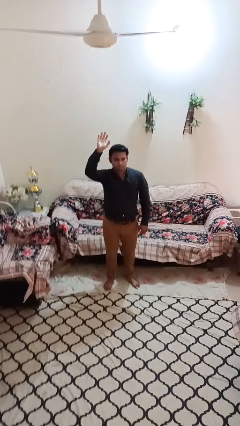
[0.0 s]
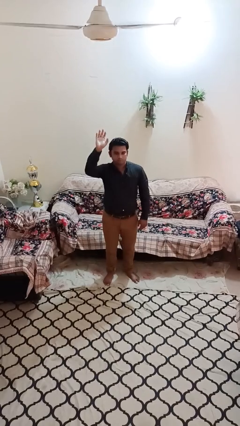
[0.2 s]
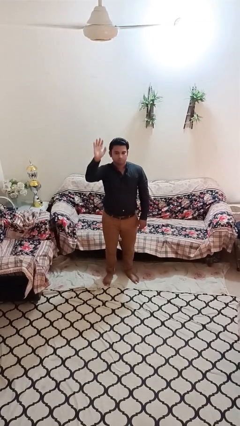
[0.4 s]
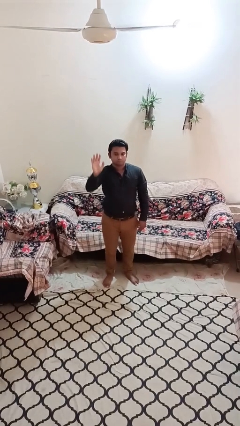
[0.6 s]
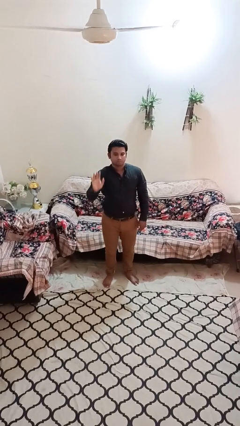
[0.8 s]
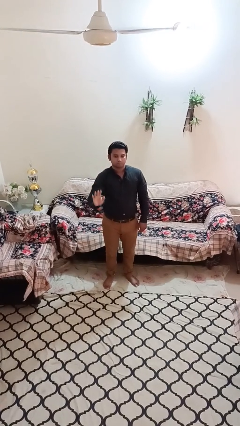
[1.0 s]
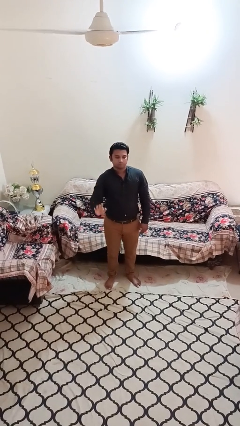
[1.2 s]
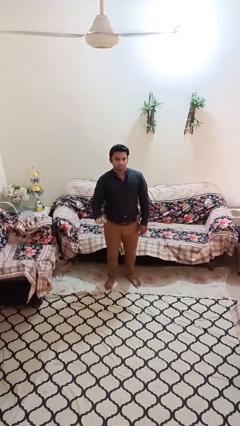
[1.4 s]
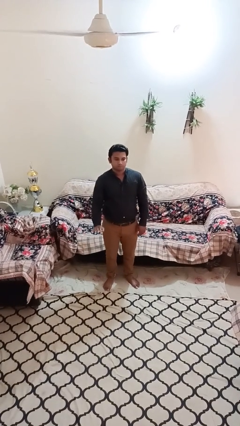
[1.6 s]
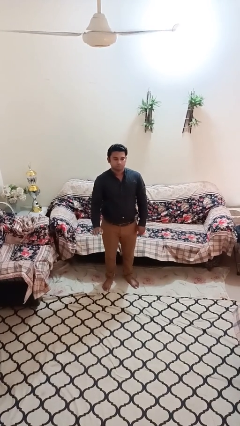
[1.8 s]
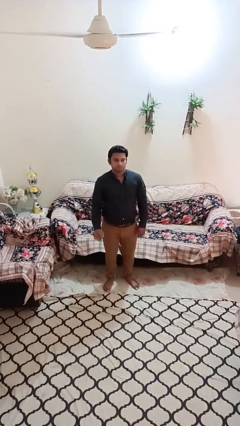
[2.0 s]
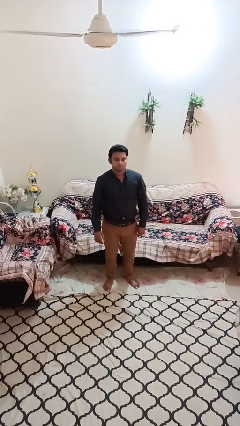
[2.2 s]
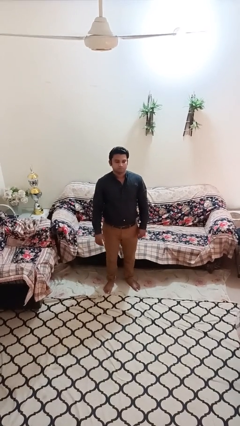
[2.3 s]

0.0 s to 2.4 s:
person gestures lower hand

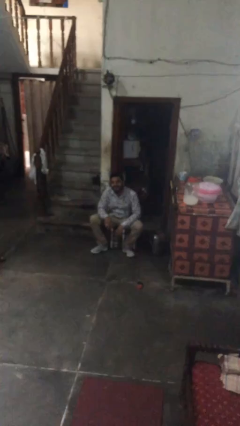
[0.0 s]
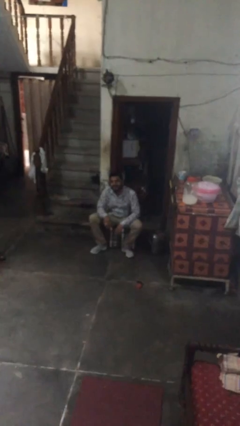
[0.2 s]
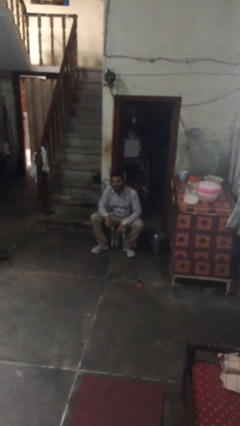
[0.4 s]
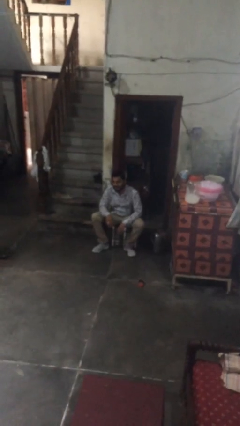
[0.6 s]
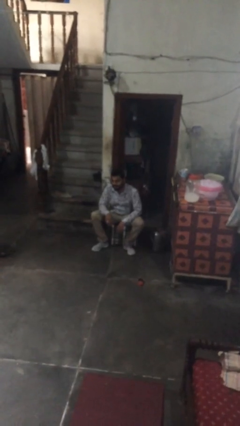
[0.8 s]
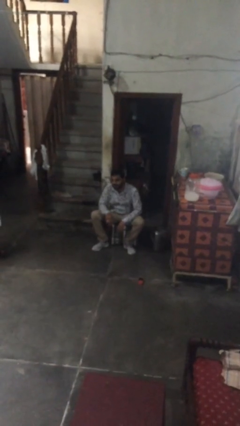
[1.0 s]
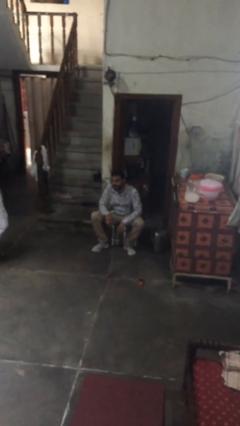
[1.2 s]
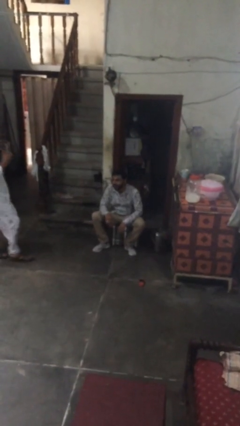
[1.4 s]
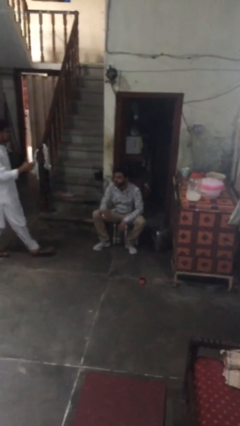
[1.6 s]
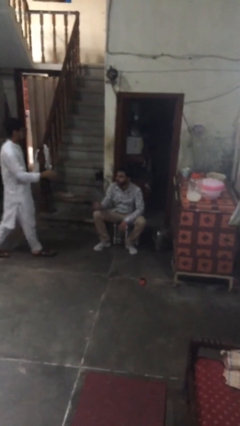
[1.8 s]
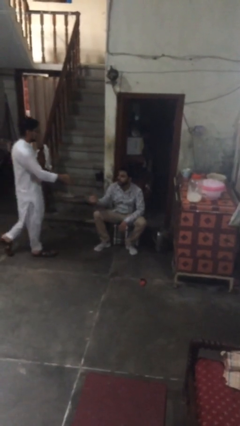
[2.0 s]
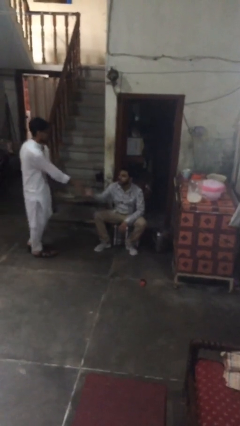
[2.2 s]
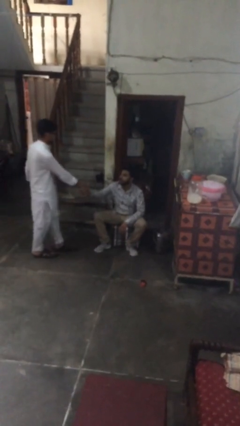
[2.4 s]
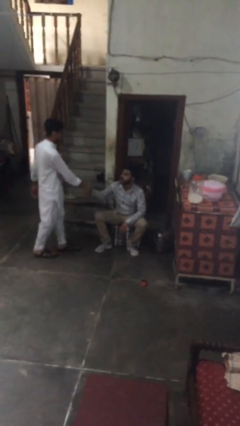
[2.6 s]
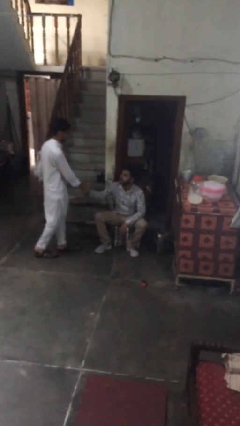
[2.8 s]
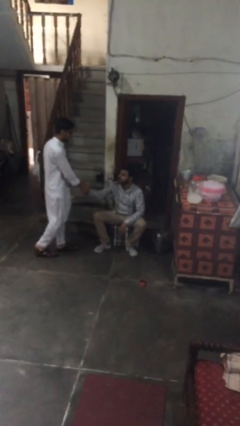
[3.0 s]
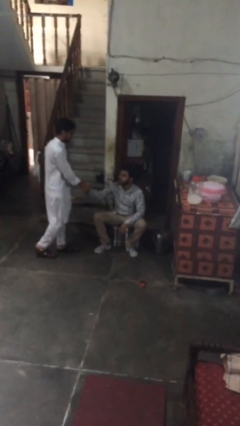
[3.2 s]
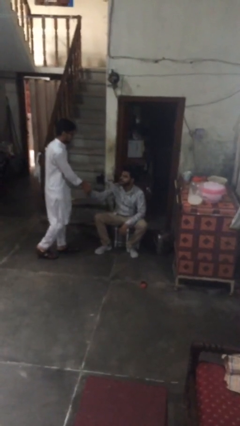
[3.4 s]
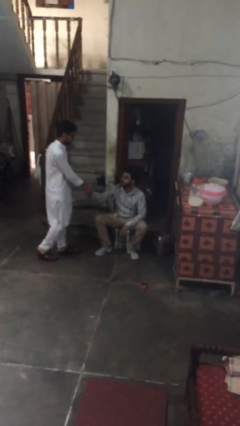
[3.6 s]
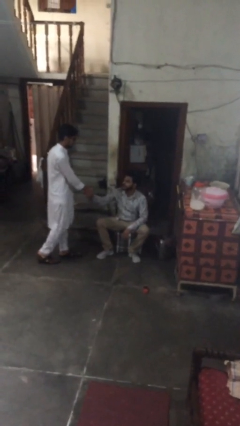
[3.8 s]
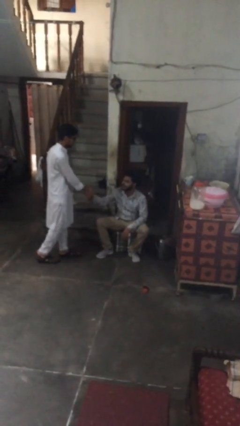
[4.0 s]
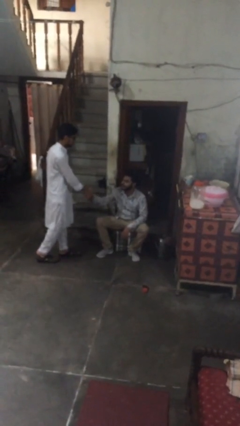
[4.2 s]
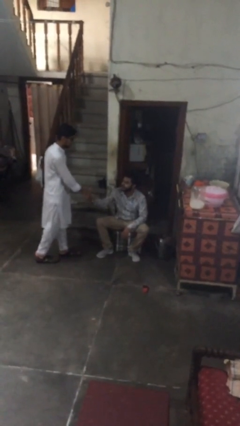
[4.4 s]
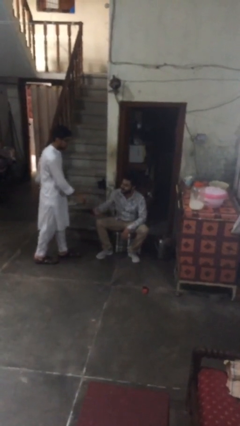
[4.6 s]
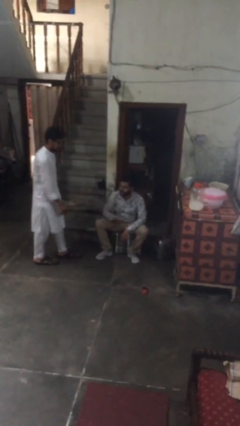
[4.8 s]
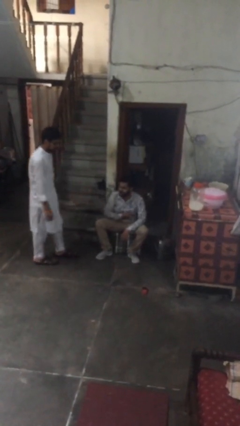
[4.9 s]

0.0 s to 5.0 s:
person shakes hand

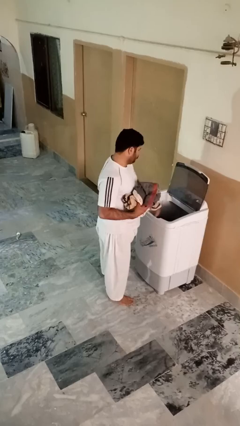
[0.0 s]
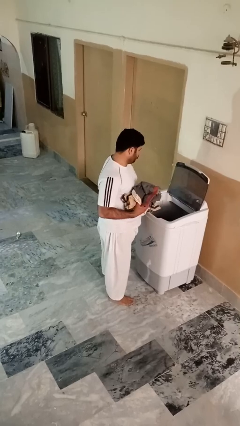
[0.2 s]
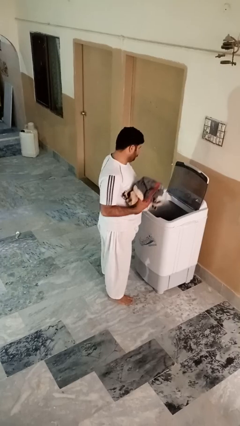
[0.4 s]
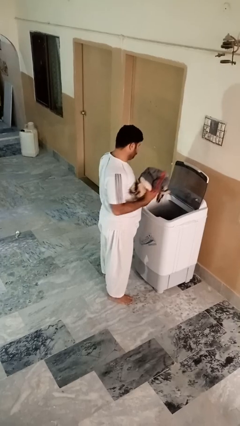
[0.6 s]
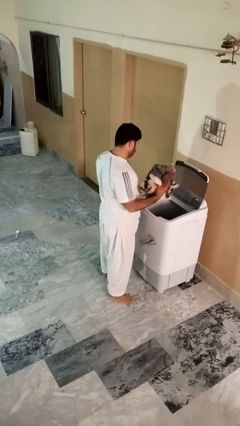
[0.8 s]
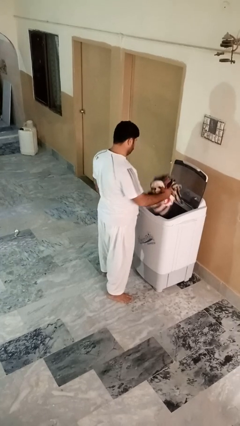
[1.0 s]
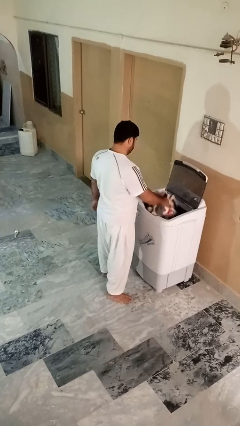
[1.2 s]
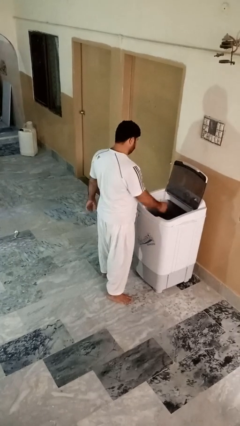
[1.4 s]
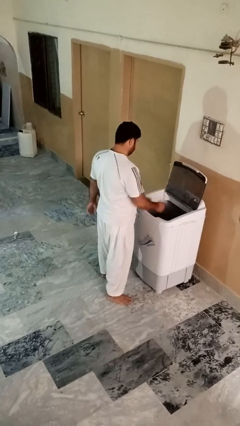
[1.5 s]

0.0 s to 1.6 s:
person loads clotheswasher

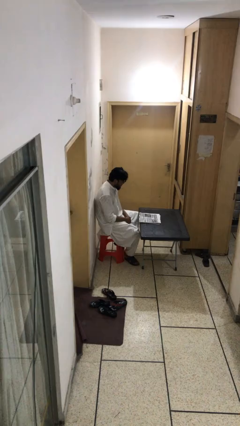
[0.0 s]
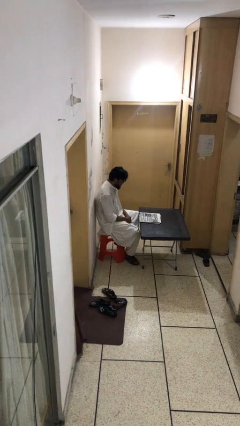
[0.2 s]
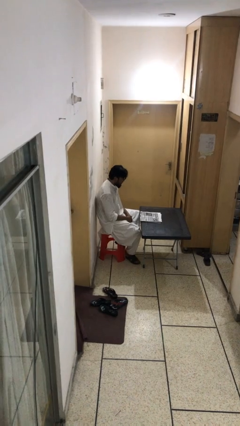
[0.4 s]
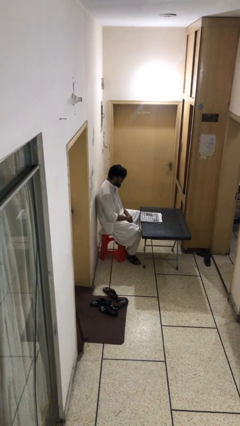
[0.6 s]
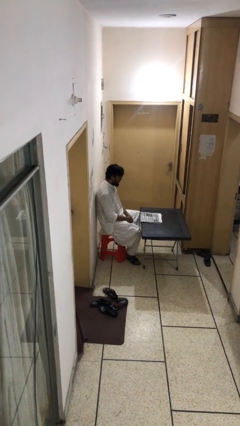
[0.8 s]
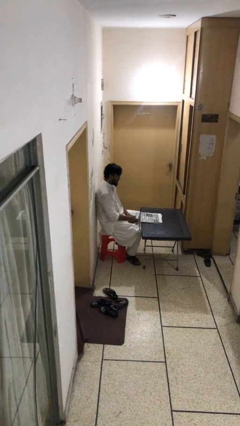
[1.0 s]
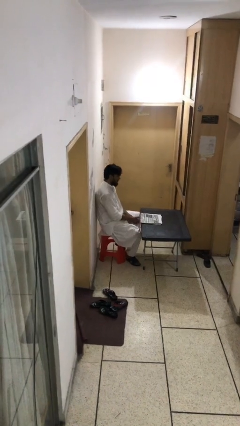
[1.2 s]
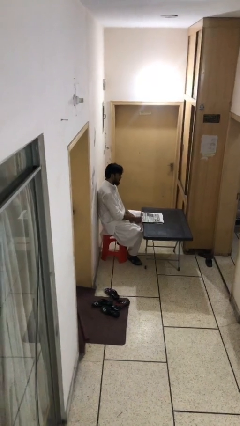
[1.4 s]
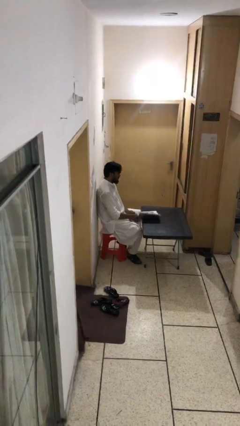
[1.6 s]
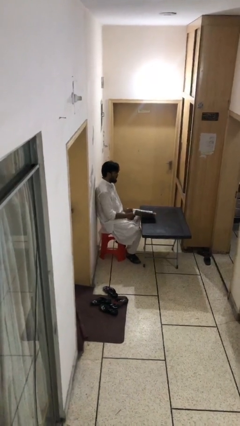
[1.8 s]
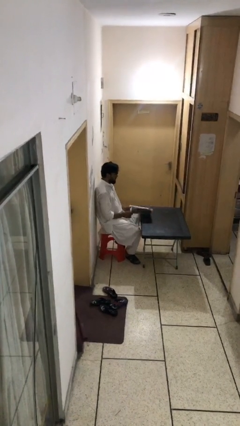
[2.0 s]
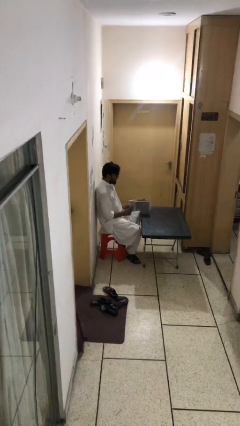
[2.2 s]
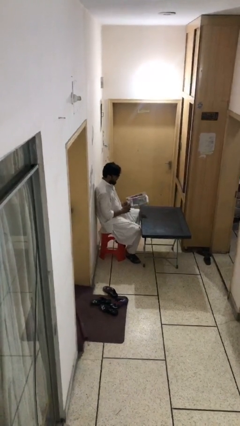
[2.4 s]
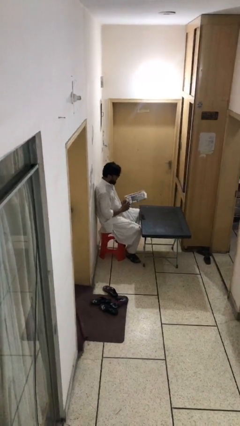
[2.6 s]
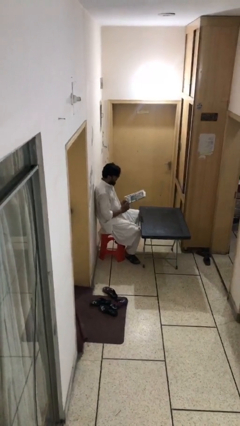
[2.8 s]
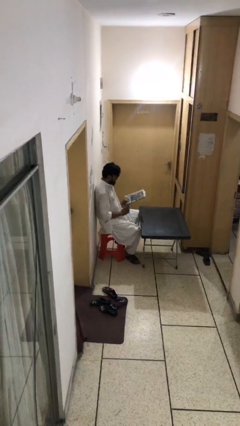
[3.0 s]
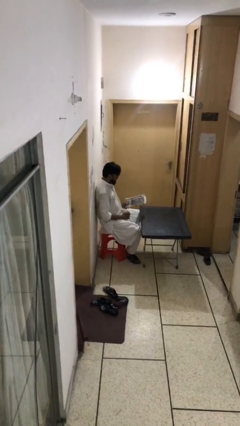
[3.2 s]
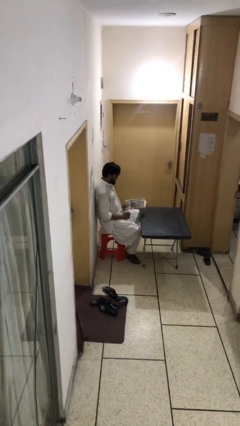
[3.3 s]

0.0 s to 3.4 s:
person picks up object from table

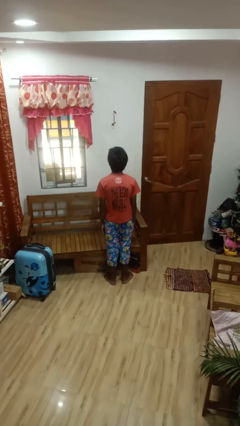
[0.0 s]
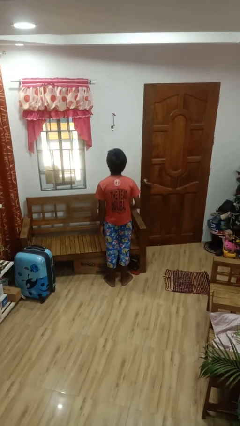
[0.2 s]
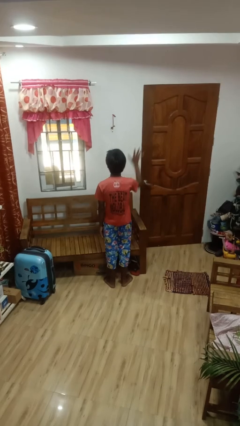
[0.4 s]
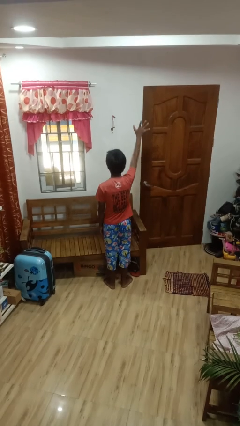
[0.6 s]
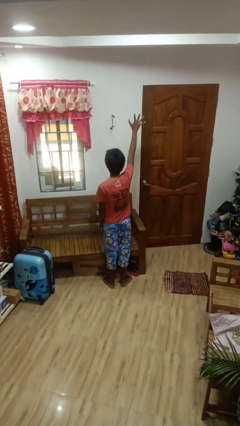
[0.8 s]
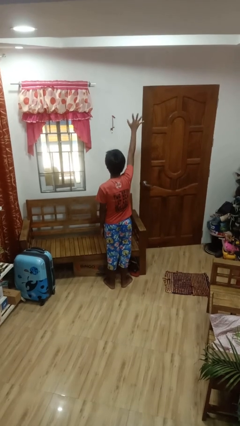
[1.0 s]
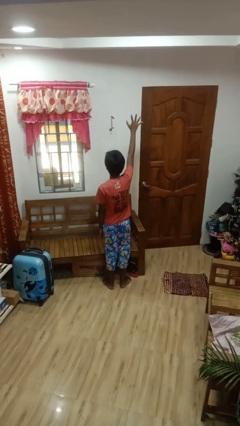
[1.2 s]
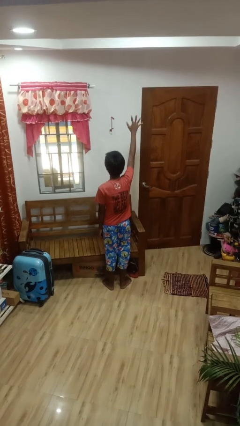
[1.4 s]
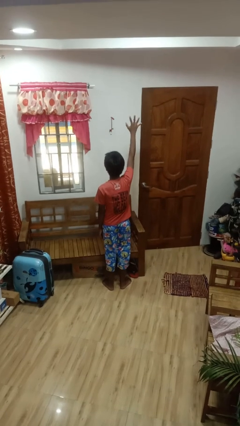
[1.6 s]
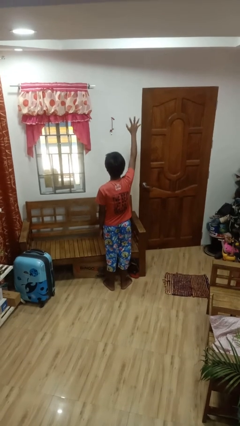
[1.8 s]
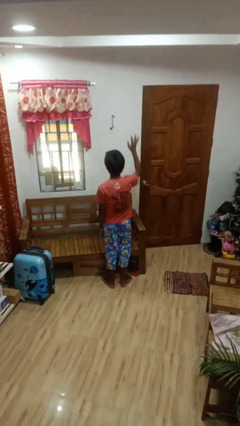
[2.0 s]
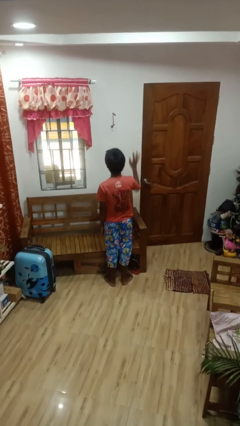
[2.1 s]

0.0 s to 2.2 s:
person gestures number five

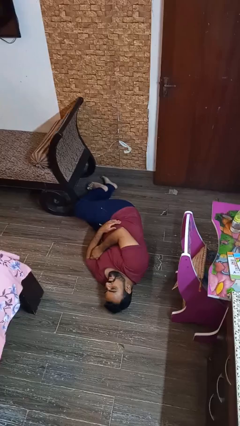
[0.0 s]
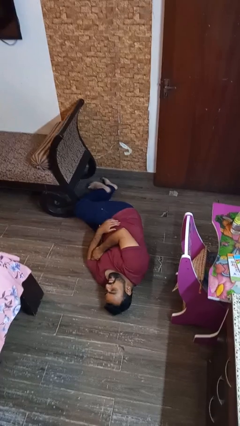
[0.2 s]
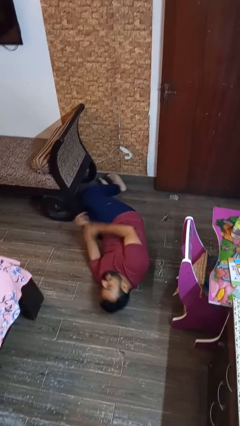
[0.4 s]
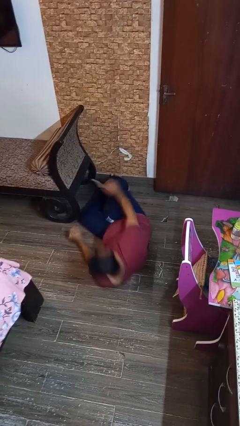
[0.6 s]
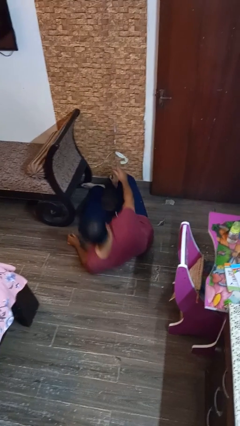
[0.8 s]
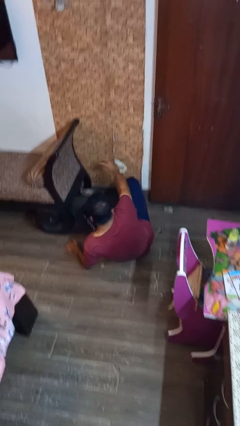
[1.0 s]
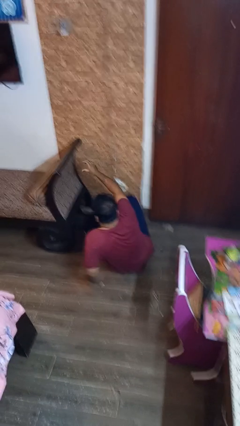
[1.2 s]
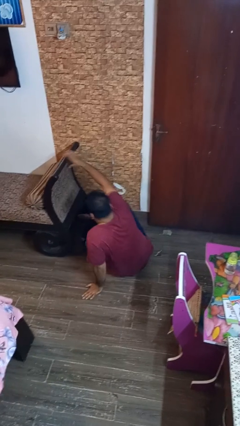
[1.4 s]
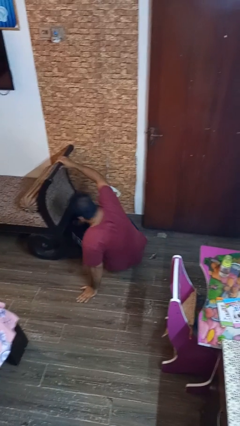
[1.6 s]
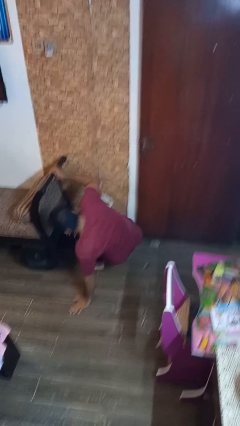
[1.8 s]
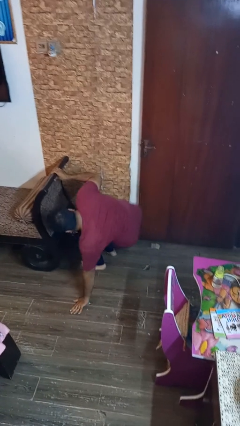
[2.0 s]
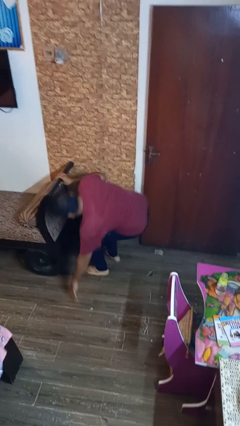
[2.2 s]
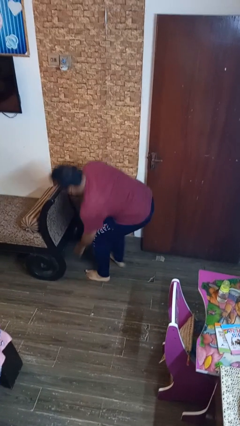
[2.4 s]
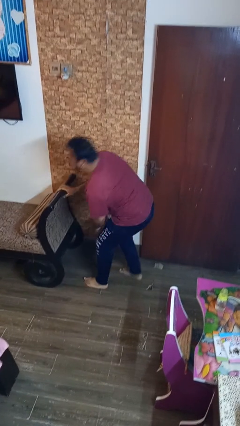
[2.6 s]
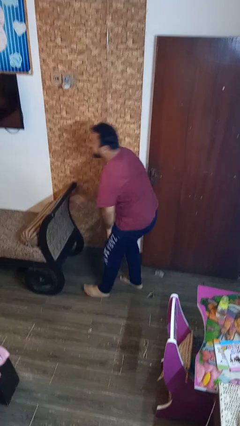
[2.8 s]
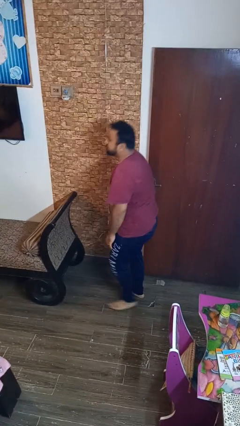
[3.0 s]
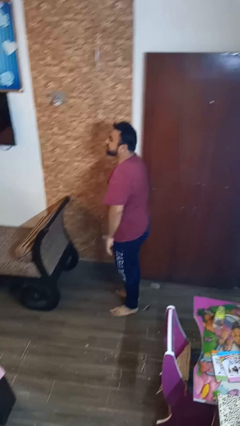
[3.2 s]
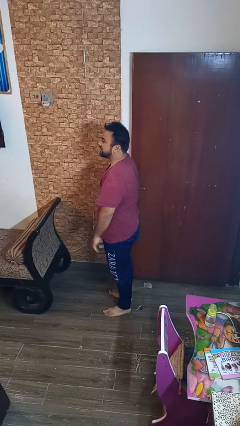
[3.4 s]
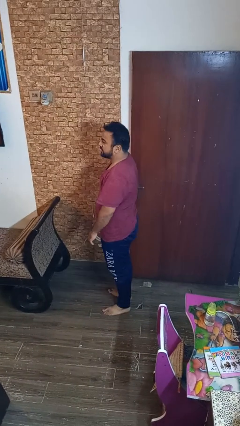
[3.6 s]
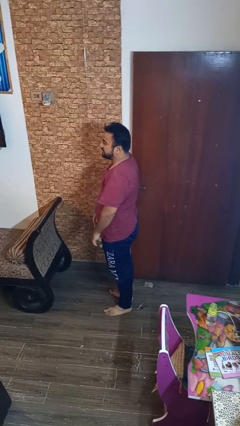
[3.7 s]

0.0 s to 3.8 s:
person stands up from floor
